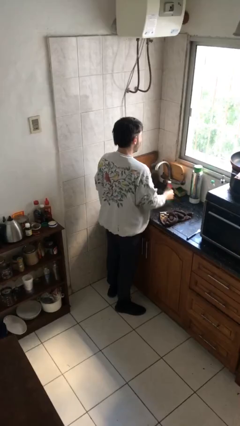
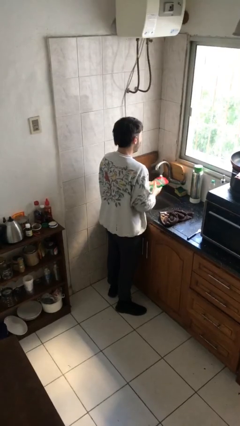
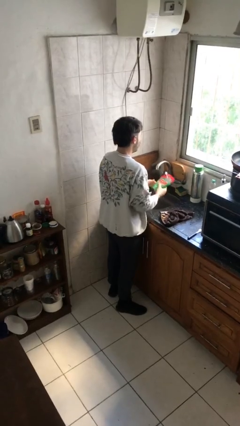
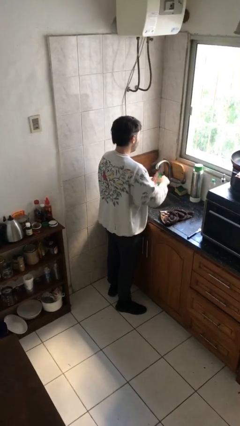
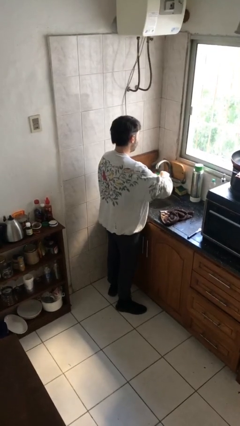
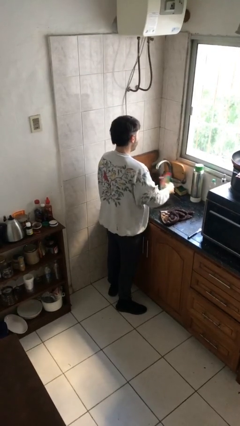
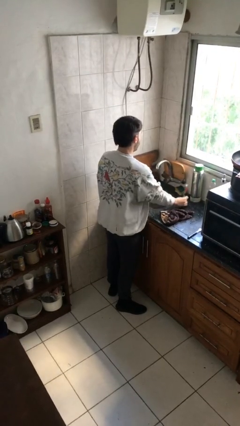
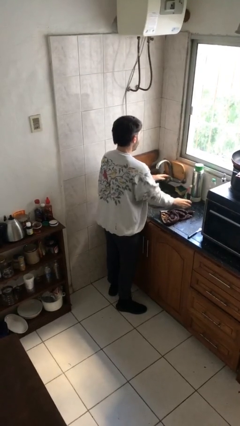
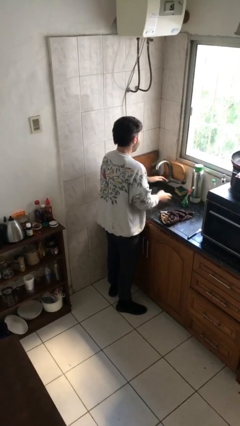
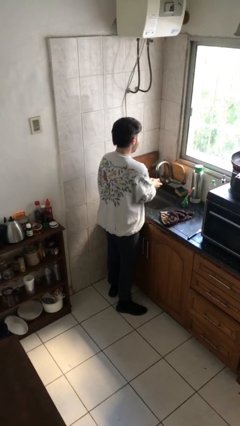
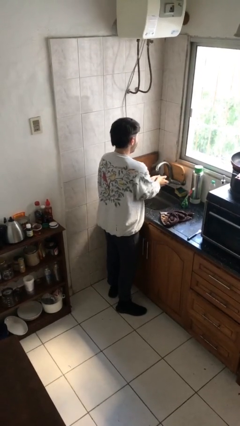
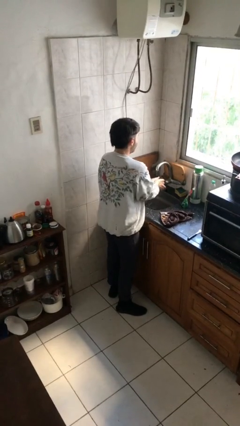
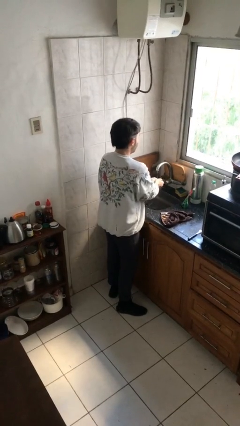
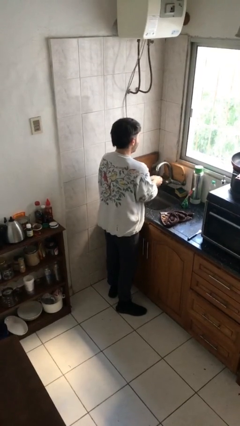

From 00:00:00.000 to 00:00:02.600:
person washes hands

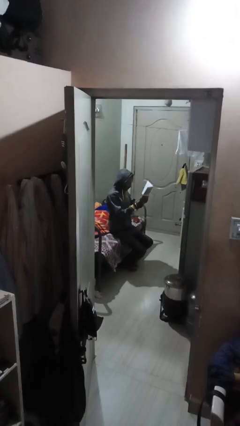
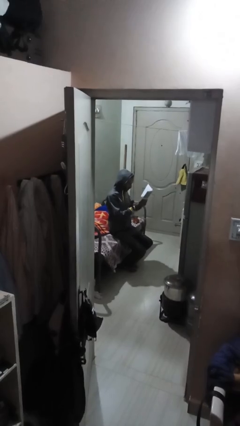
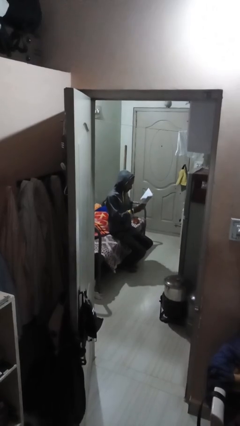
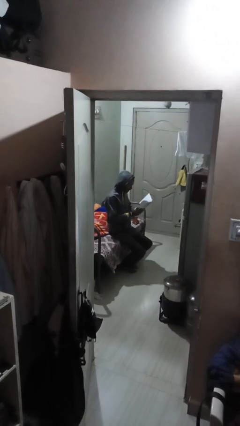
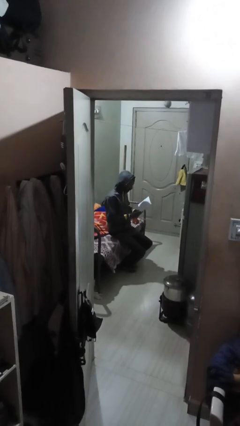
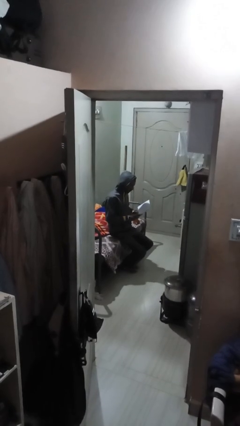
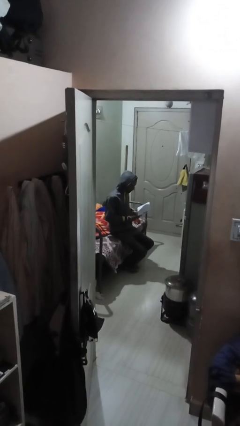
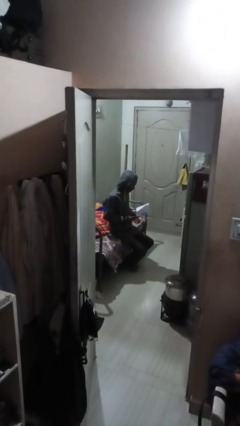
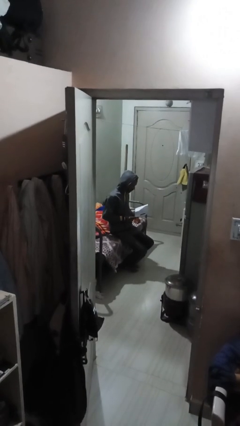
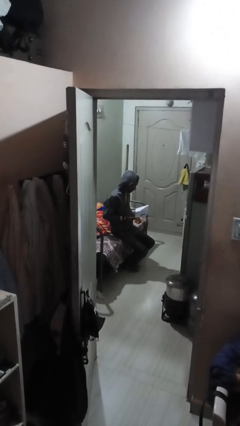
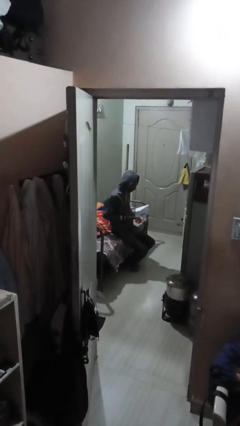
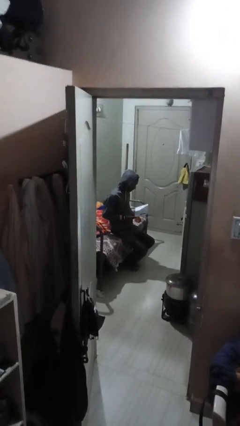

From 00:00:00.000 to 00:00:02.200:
person reads document

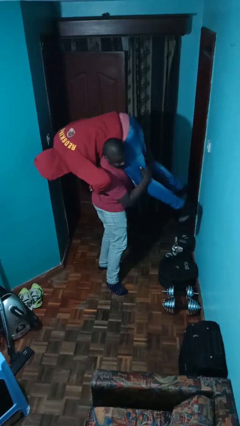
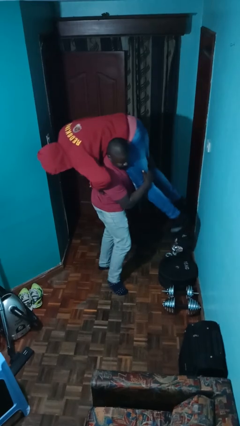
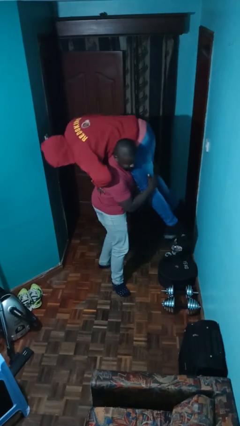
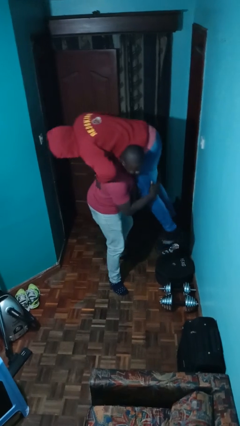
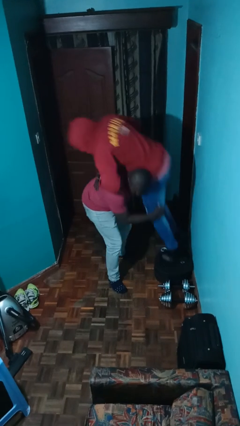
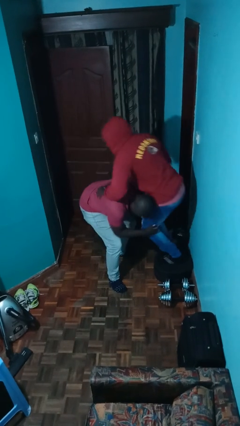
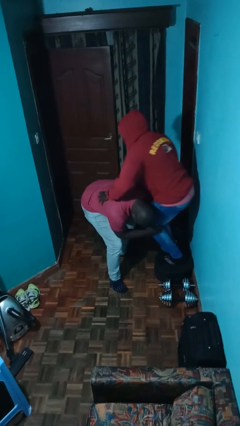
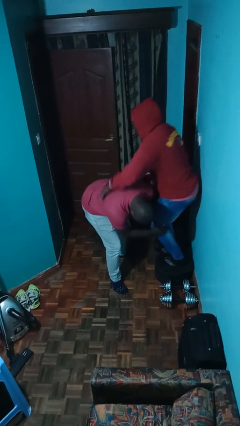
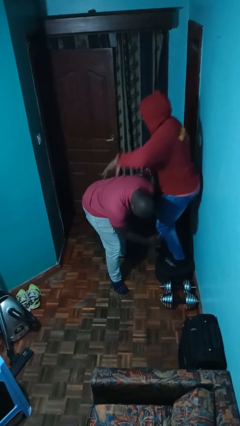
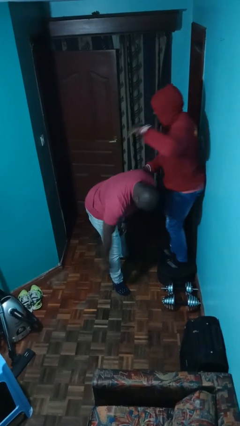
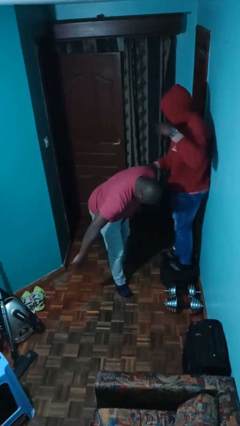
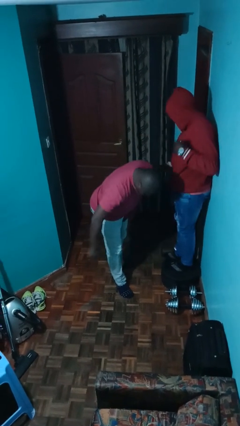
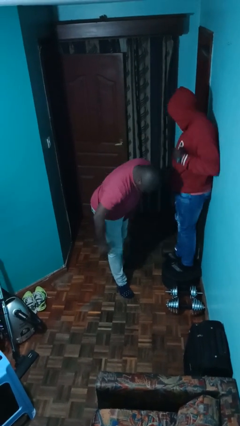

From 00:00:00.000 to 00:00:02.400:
person puts down person

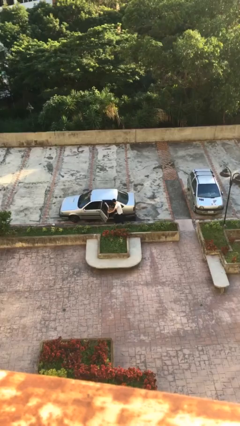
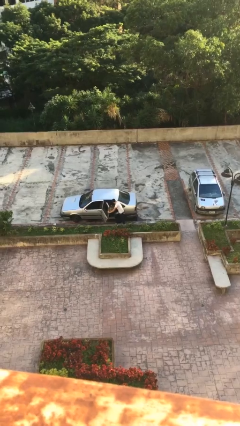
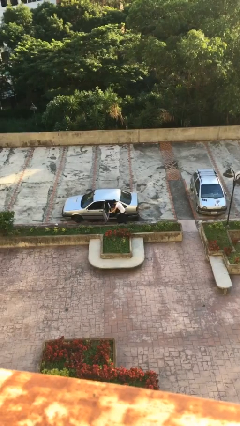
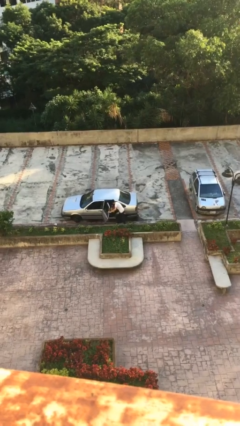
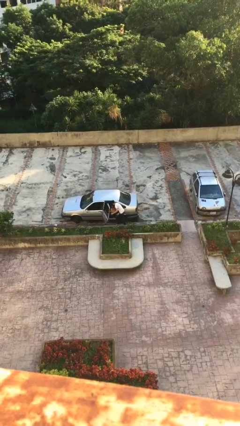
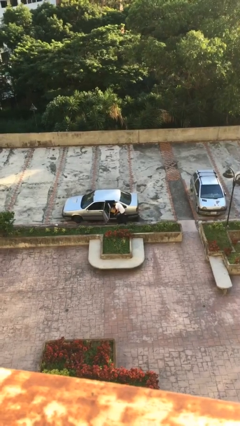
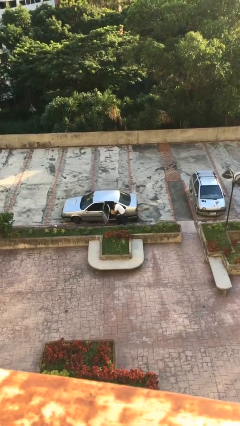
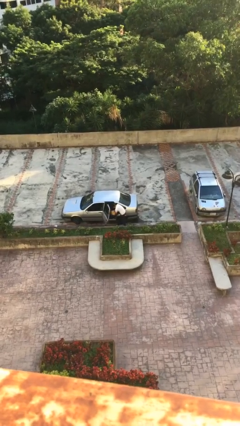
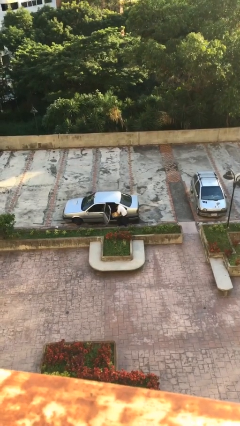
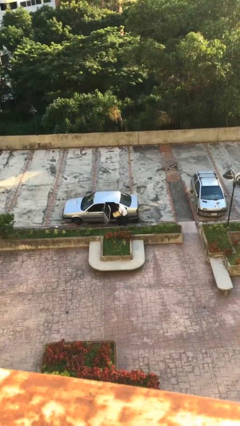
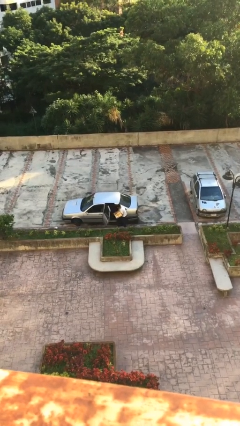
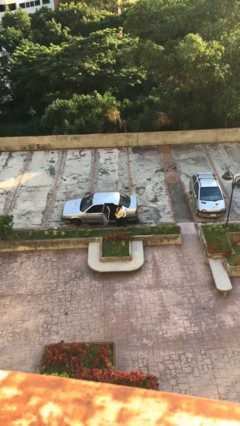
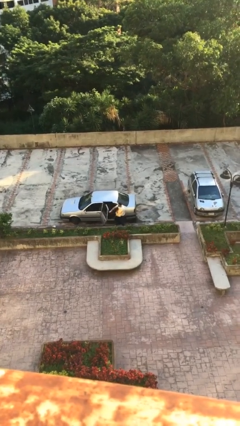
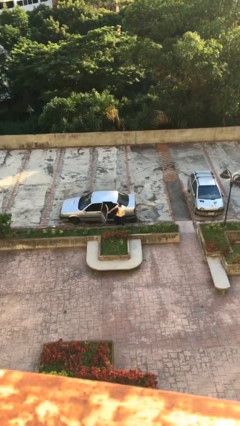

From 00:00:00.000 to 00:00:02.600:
person unloads car

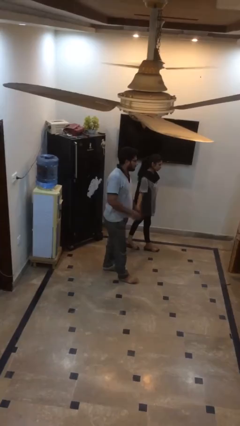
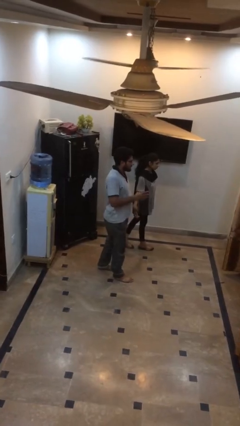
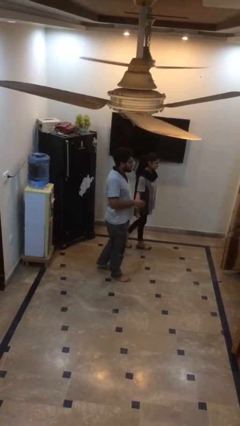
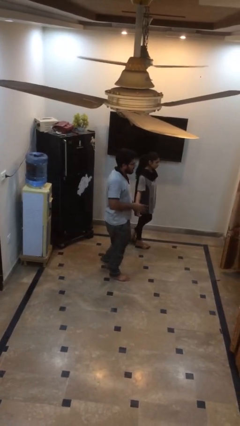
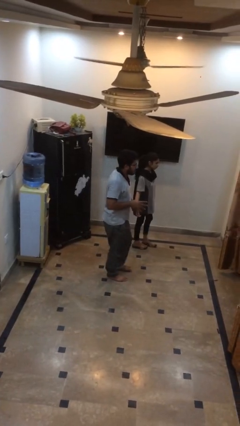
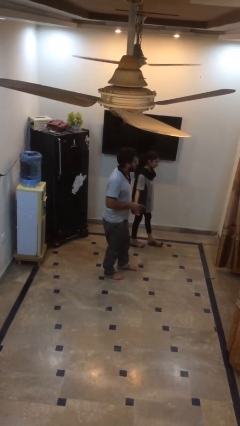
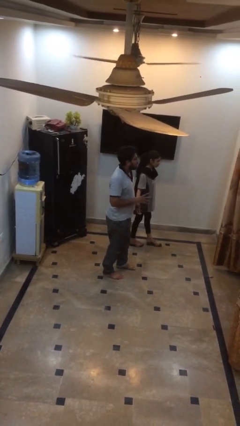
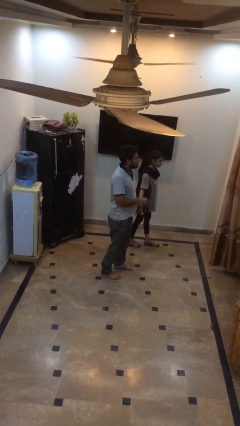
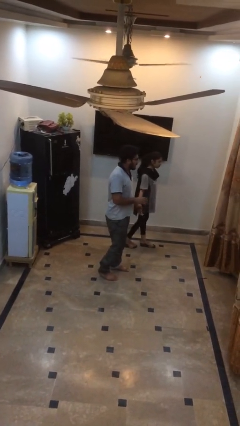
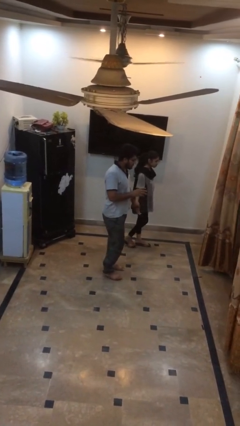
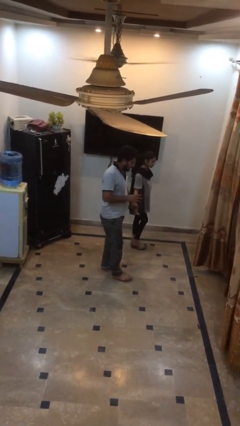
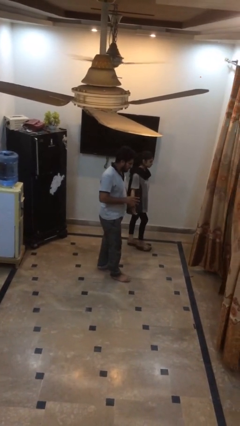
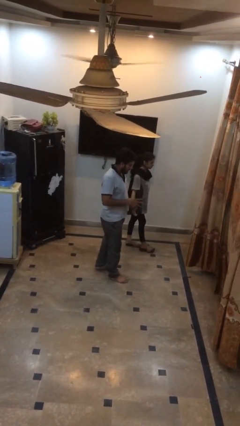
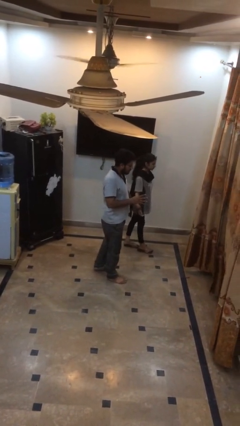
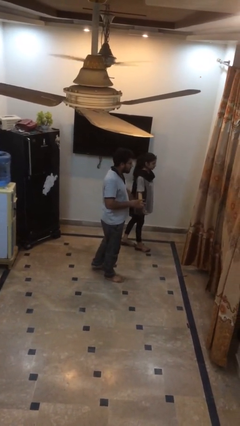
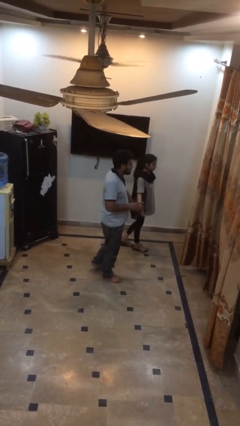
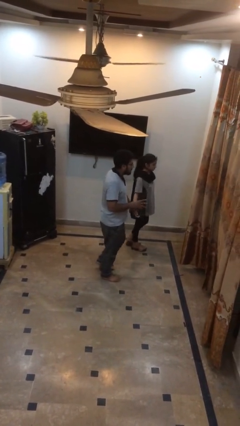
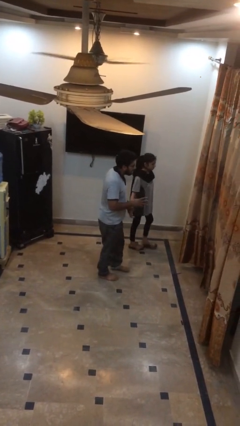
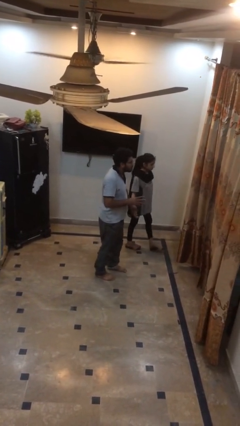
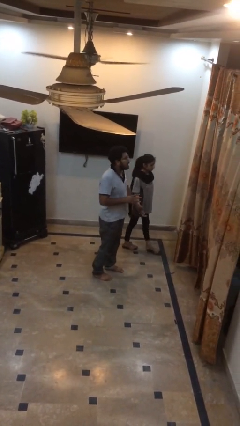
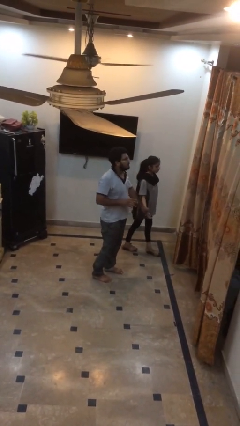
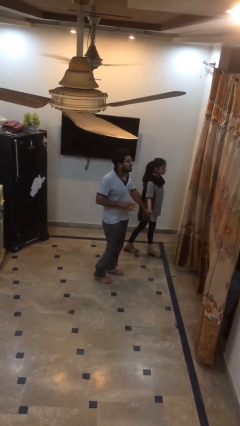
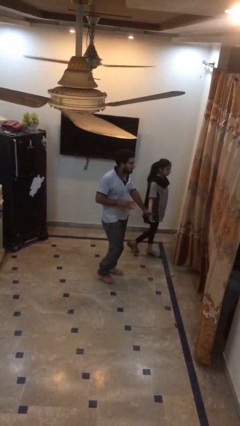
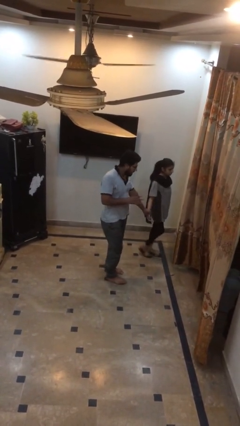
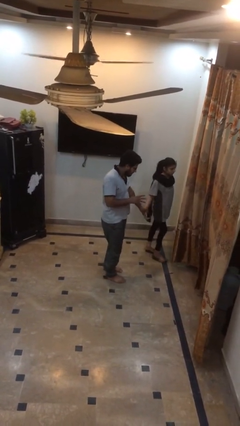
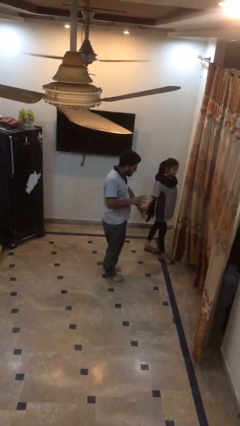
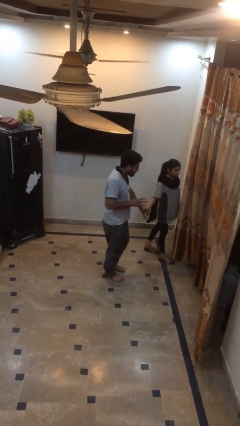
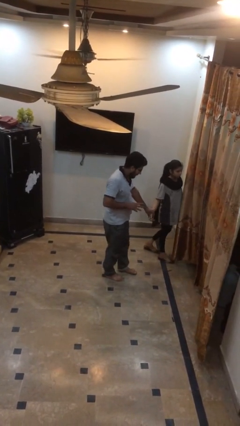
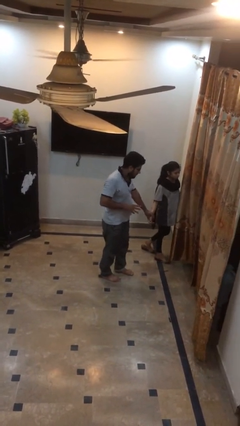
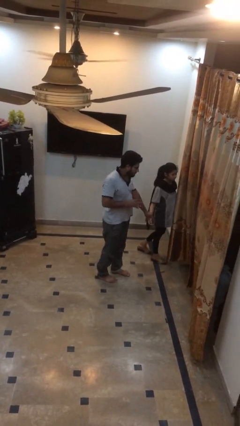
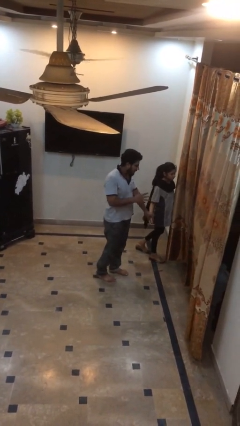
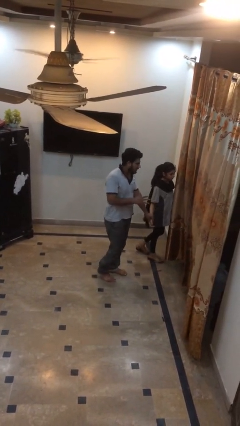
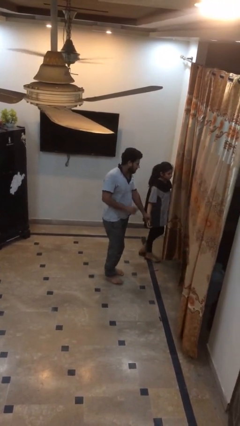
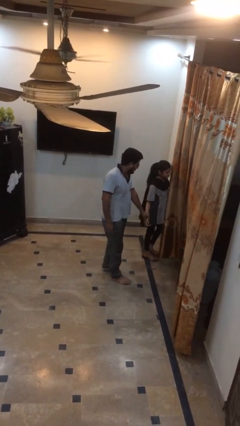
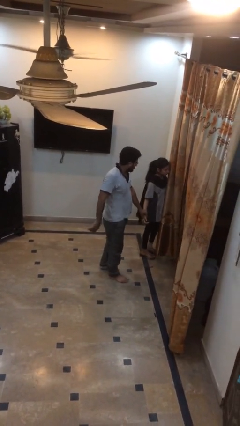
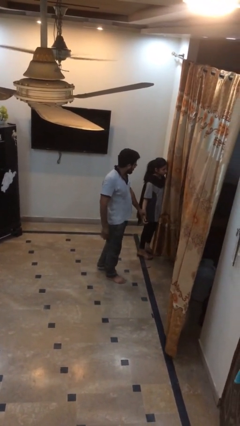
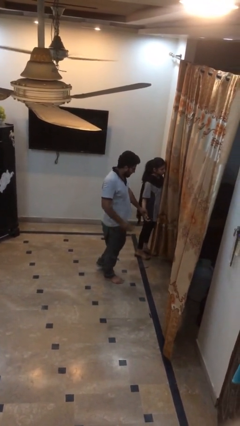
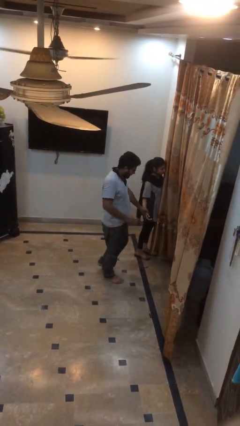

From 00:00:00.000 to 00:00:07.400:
person holds hand

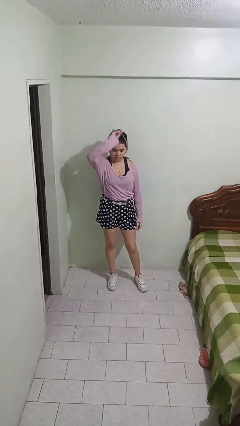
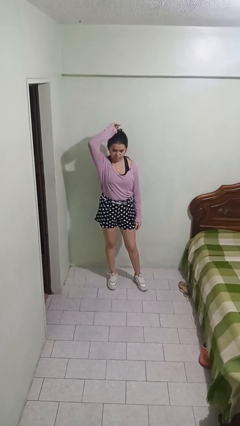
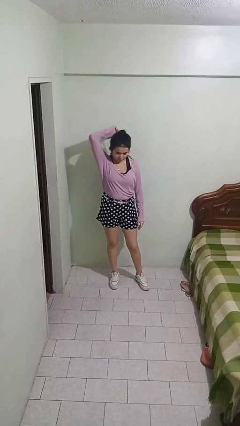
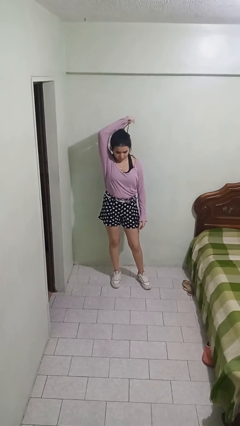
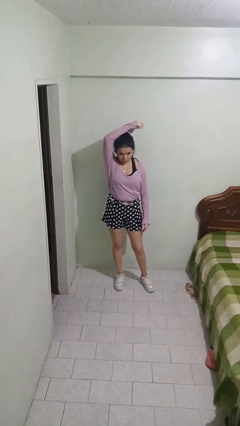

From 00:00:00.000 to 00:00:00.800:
person takes off necklace
